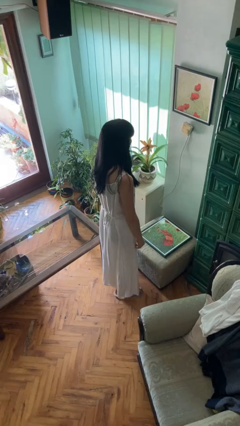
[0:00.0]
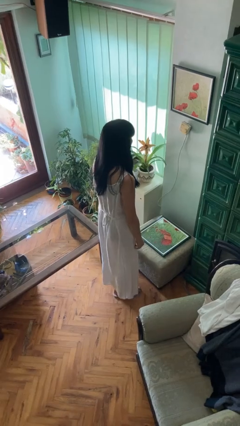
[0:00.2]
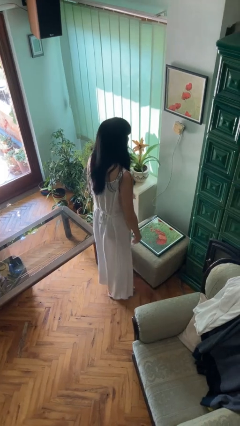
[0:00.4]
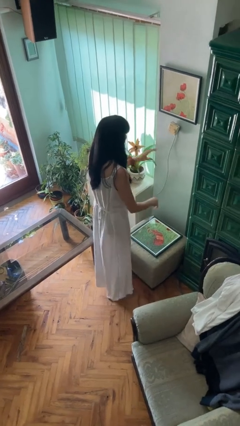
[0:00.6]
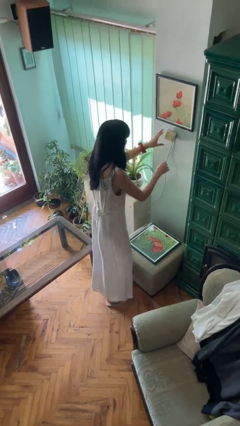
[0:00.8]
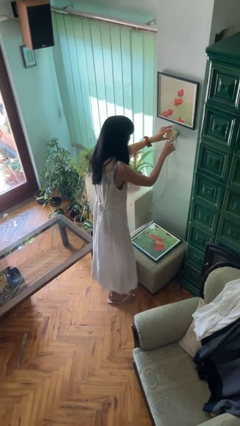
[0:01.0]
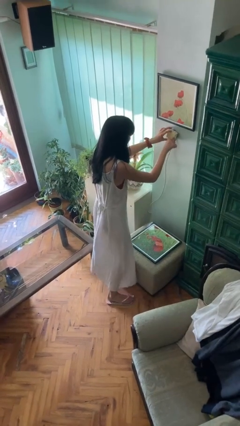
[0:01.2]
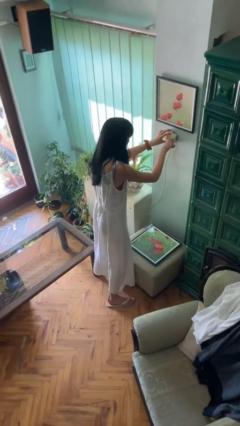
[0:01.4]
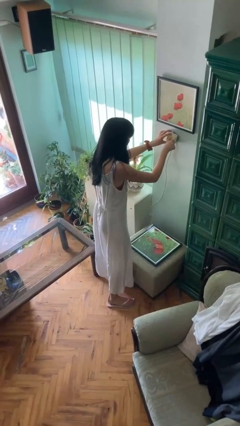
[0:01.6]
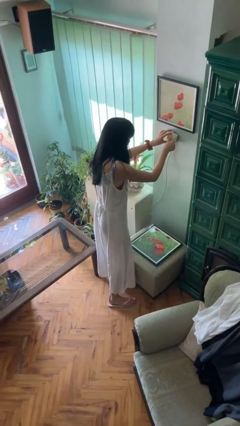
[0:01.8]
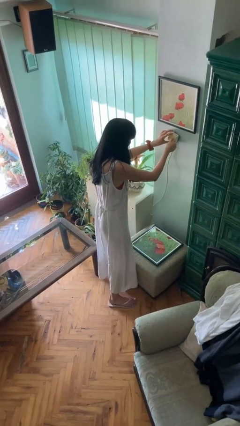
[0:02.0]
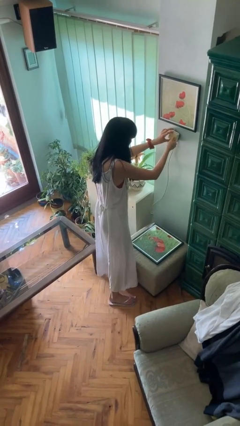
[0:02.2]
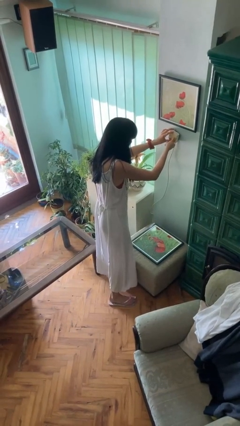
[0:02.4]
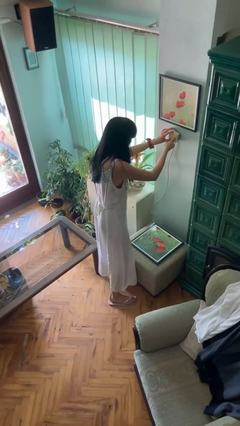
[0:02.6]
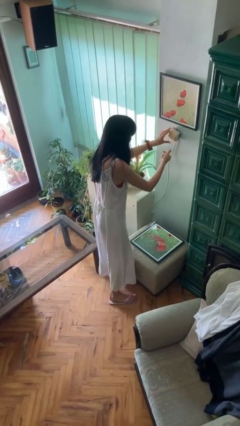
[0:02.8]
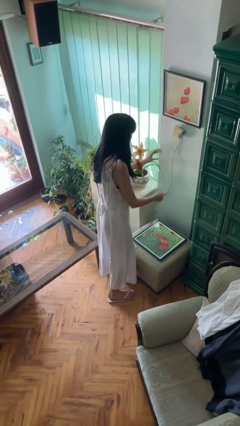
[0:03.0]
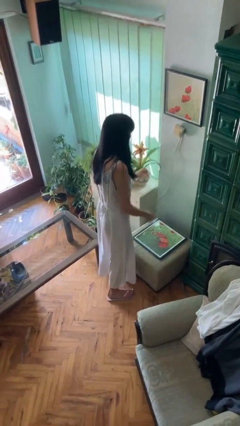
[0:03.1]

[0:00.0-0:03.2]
person adjusts thermostat

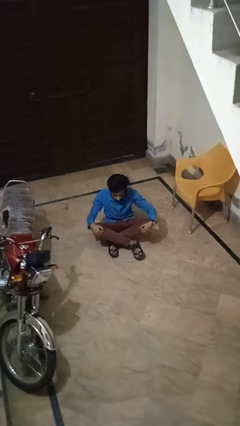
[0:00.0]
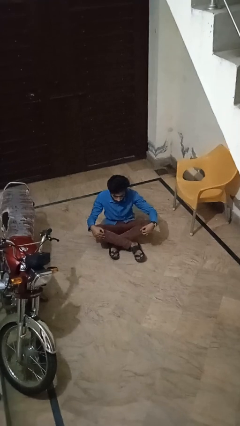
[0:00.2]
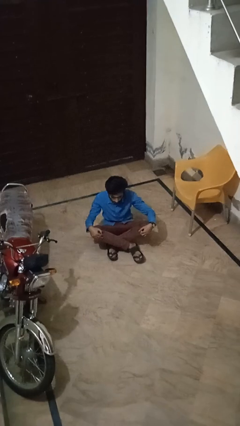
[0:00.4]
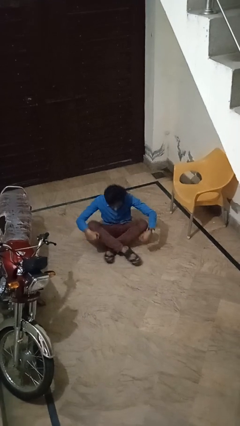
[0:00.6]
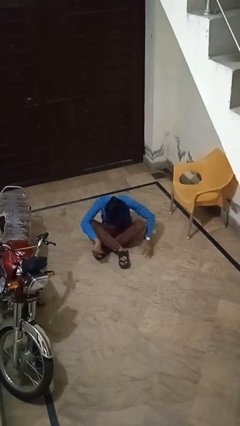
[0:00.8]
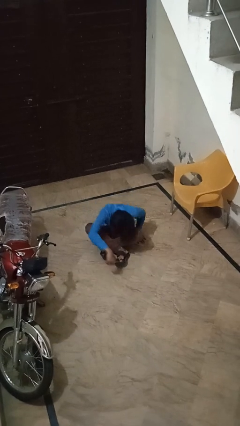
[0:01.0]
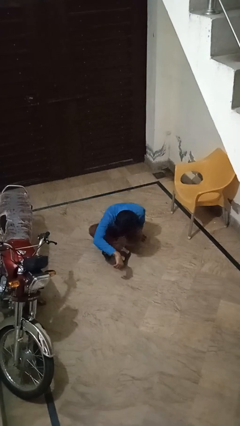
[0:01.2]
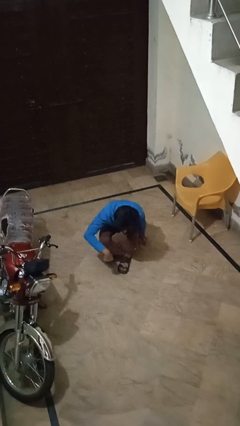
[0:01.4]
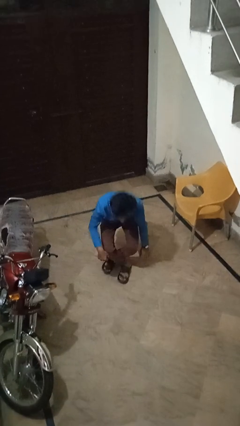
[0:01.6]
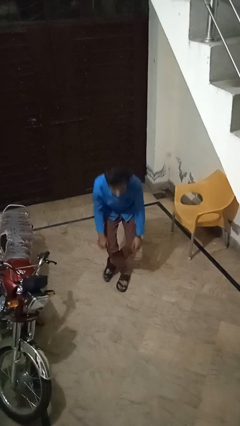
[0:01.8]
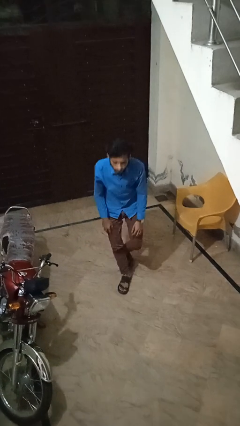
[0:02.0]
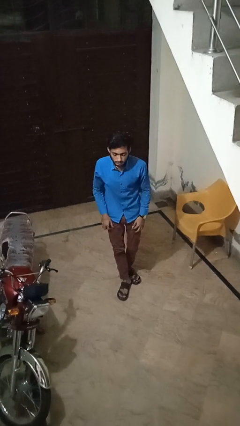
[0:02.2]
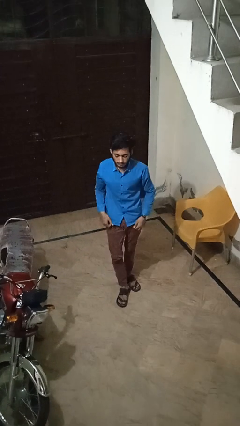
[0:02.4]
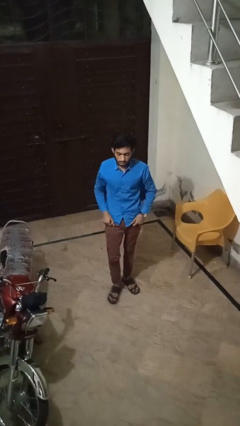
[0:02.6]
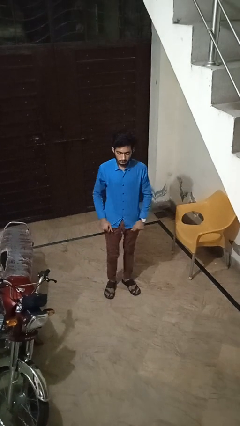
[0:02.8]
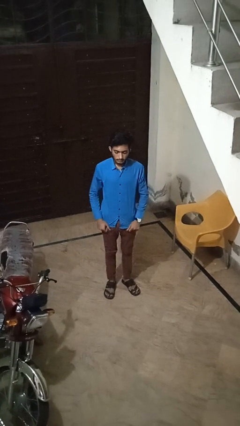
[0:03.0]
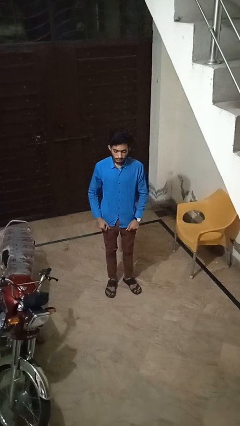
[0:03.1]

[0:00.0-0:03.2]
person stands up from floor

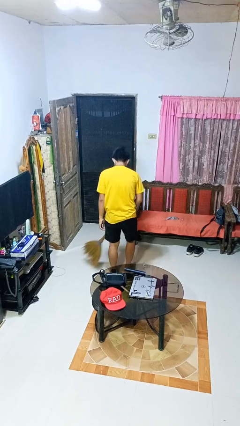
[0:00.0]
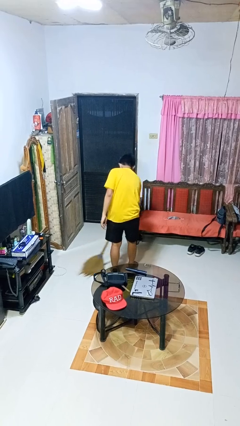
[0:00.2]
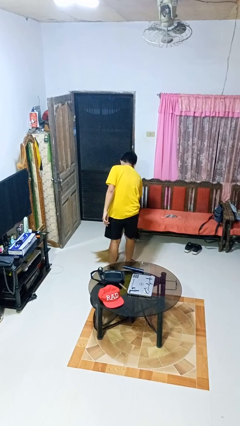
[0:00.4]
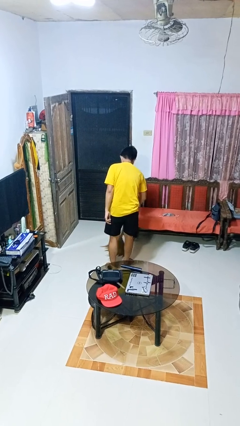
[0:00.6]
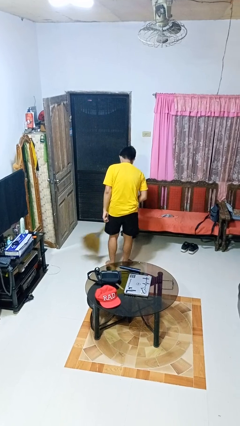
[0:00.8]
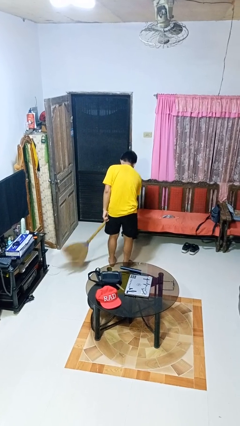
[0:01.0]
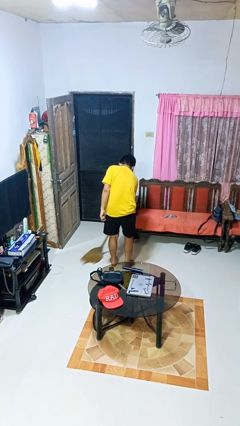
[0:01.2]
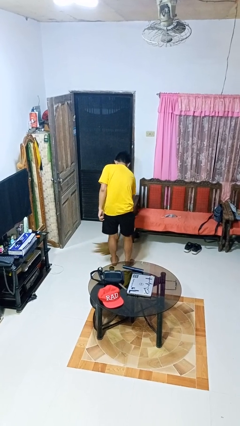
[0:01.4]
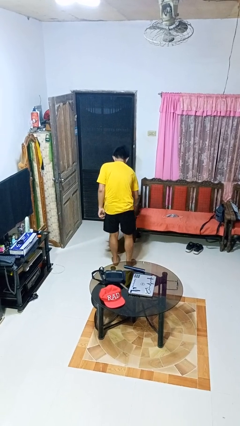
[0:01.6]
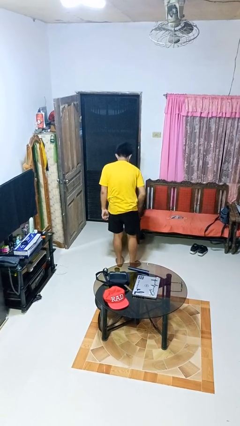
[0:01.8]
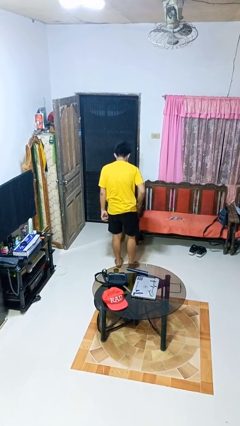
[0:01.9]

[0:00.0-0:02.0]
person sweeps floor

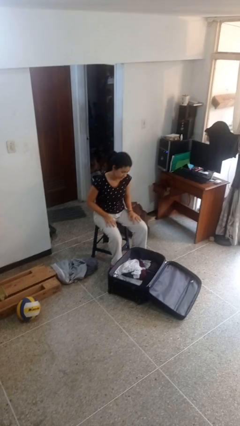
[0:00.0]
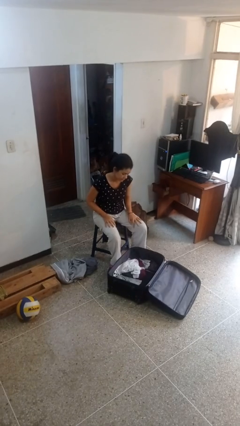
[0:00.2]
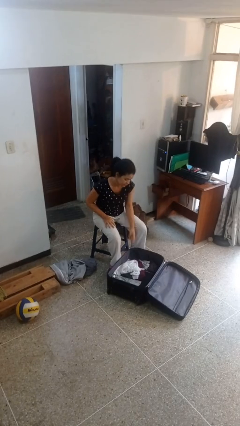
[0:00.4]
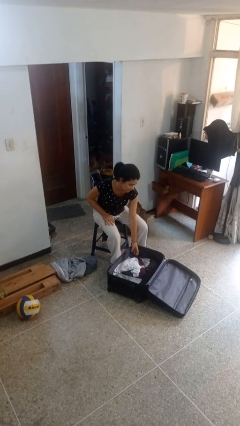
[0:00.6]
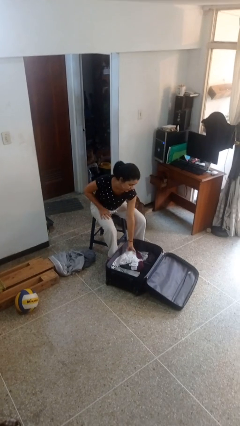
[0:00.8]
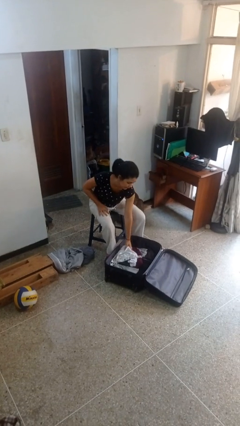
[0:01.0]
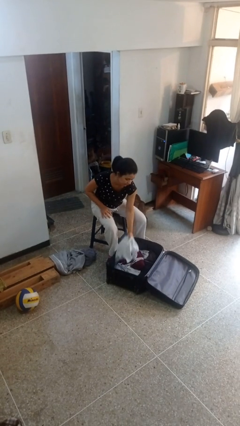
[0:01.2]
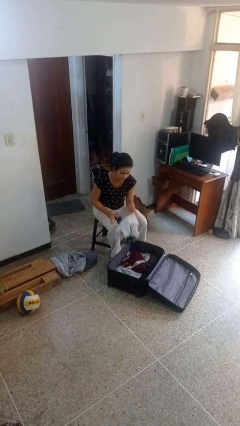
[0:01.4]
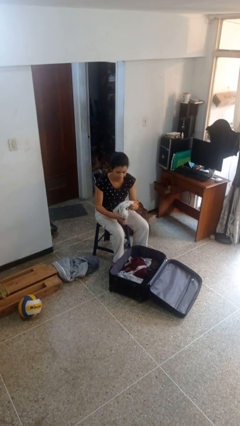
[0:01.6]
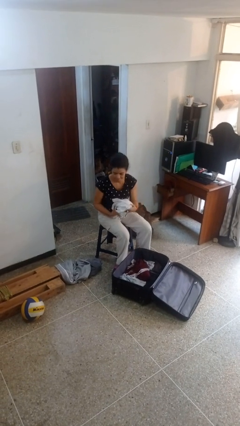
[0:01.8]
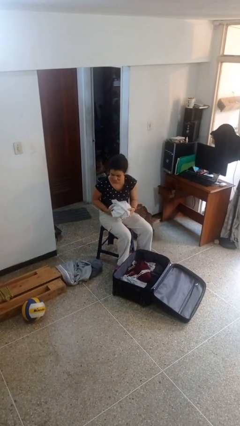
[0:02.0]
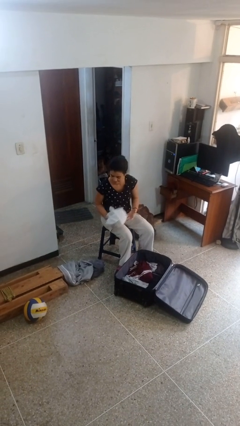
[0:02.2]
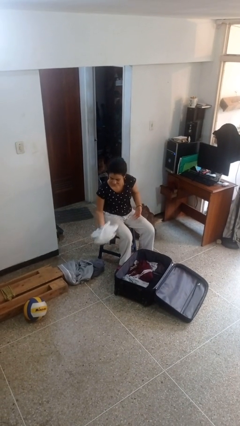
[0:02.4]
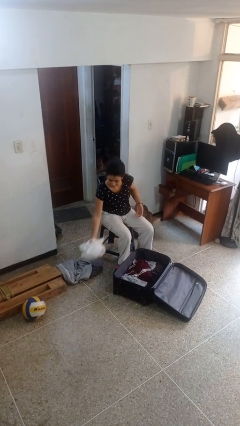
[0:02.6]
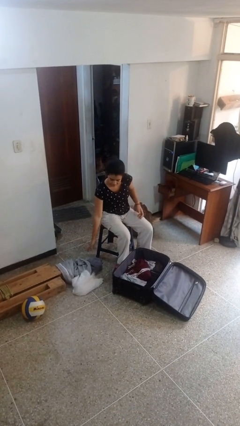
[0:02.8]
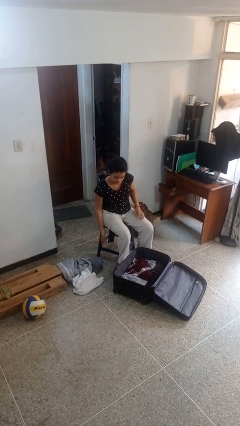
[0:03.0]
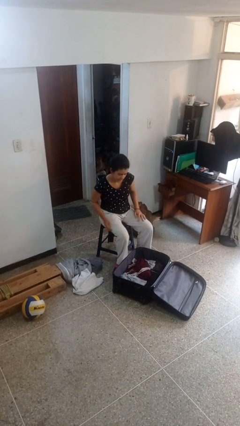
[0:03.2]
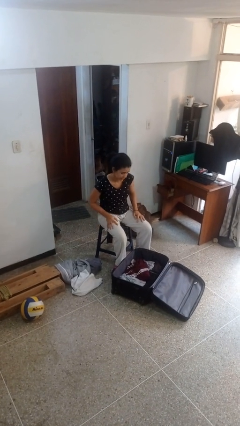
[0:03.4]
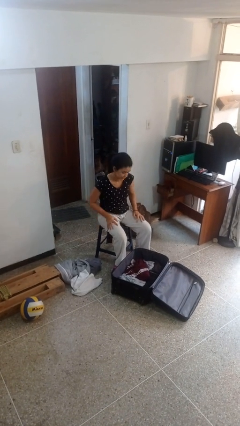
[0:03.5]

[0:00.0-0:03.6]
person unloads clothes from suitcase

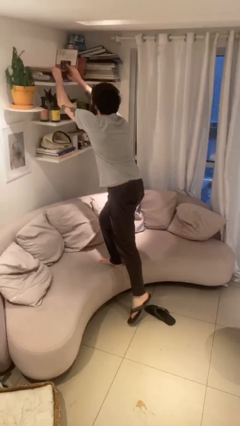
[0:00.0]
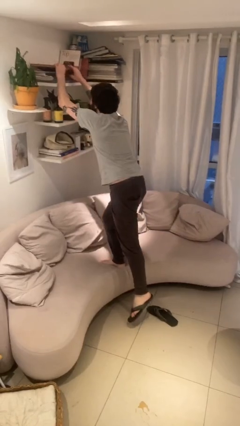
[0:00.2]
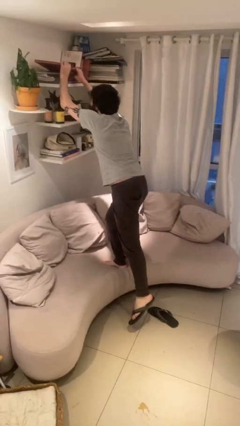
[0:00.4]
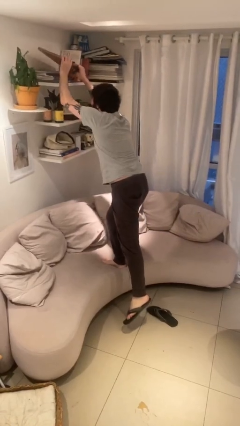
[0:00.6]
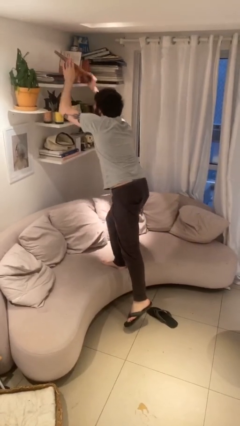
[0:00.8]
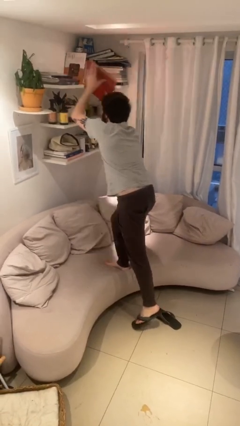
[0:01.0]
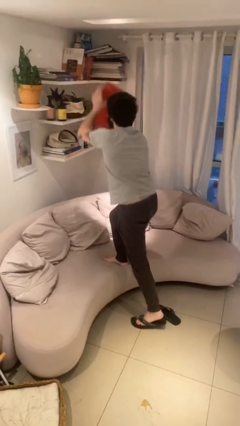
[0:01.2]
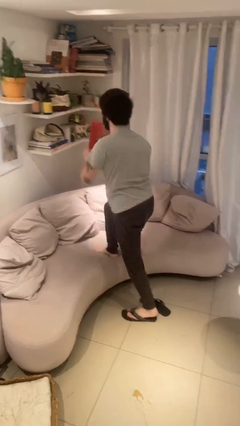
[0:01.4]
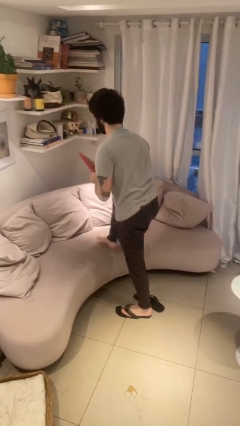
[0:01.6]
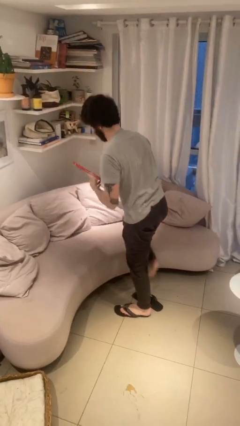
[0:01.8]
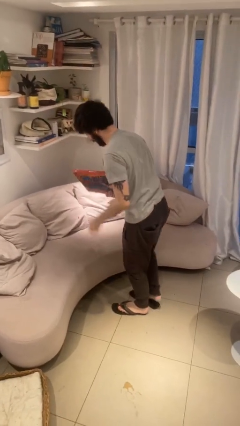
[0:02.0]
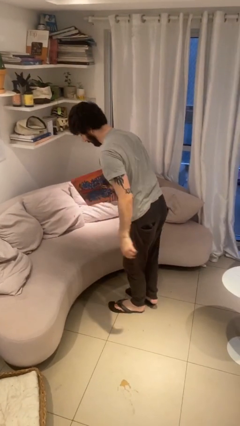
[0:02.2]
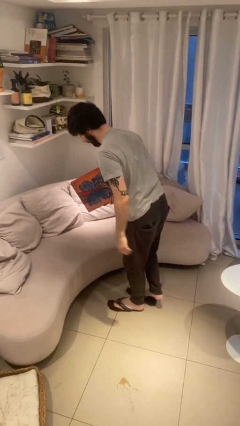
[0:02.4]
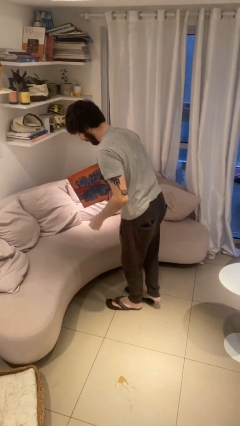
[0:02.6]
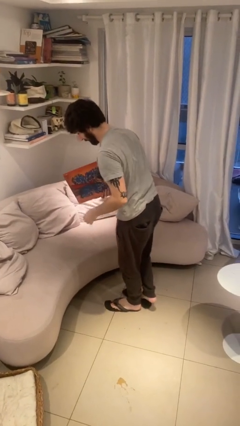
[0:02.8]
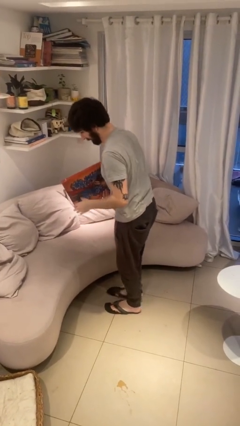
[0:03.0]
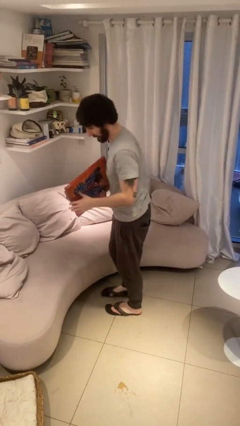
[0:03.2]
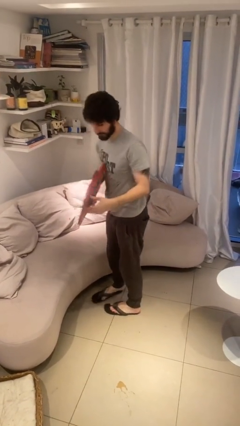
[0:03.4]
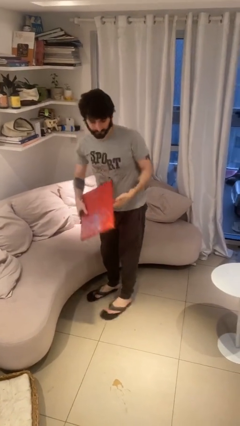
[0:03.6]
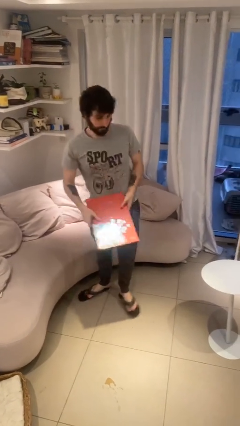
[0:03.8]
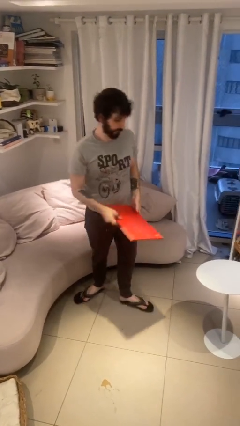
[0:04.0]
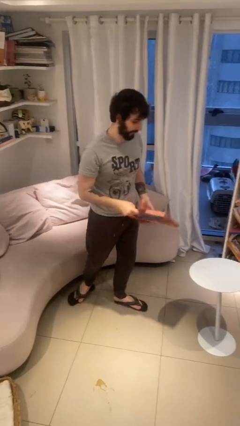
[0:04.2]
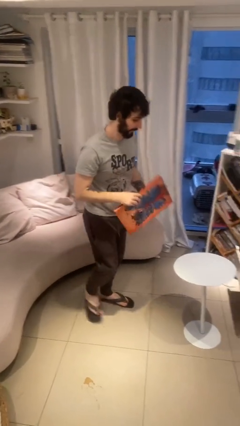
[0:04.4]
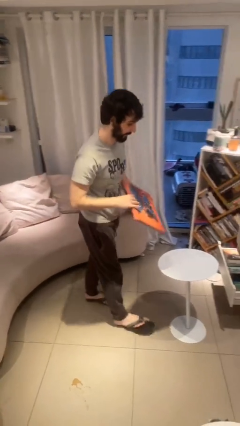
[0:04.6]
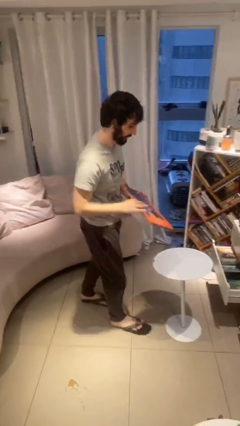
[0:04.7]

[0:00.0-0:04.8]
person picks up object from shelf

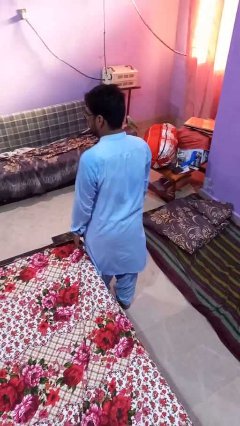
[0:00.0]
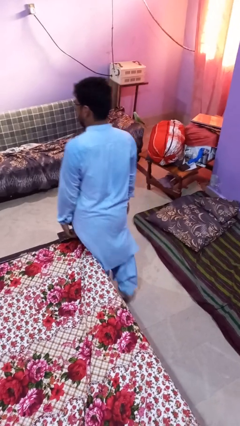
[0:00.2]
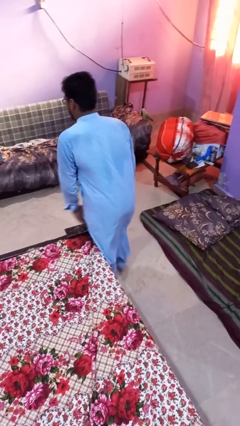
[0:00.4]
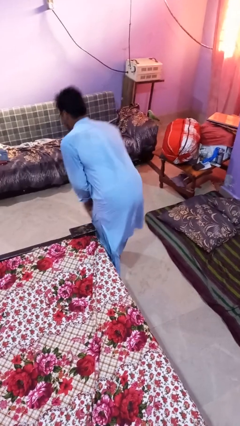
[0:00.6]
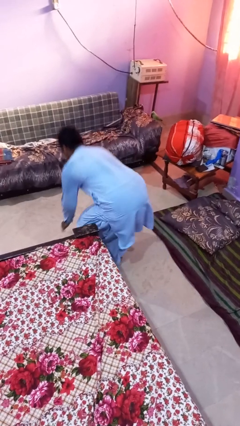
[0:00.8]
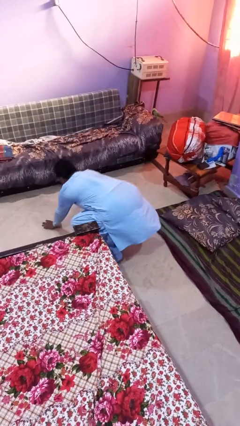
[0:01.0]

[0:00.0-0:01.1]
person trips on object on floor
